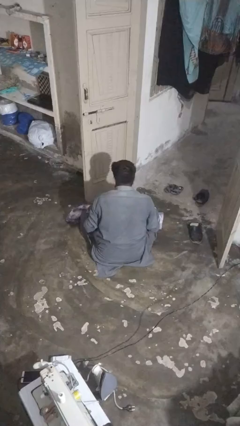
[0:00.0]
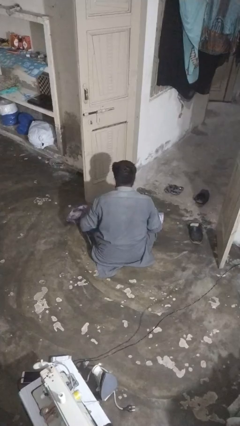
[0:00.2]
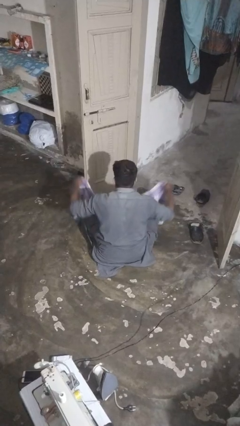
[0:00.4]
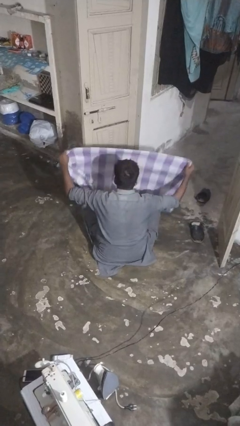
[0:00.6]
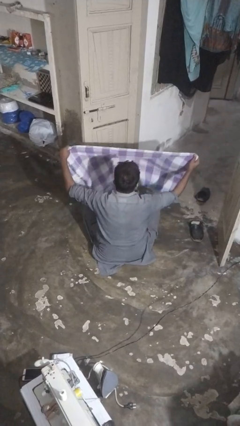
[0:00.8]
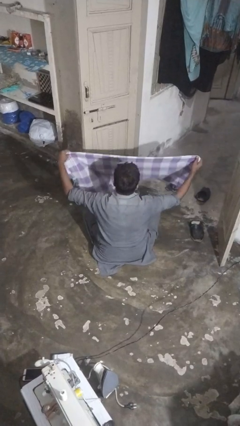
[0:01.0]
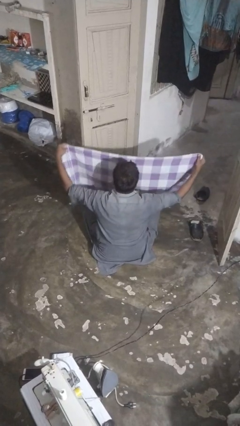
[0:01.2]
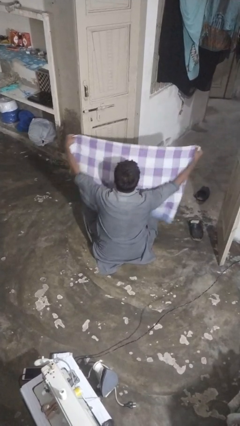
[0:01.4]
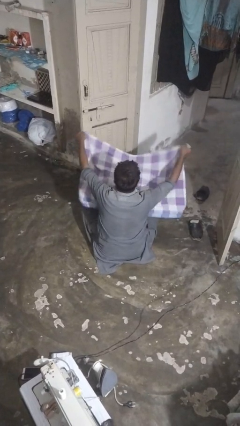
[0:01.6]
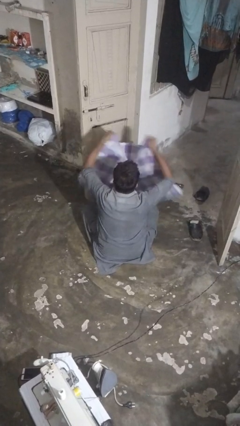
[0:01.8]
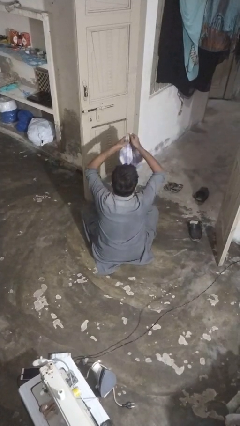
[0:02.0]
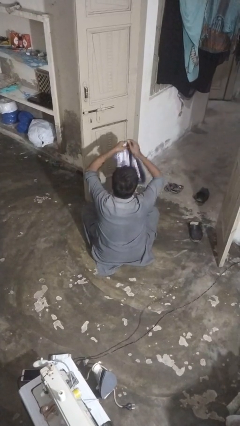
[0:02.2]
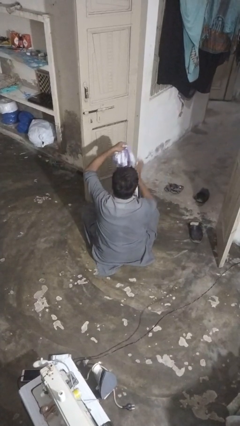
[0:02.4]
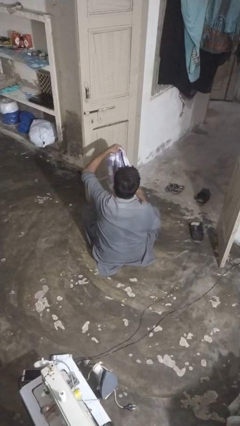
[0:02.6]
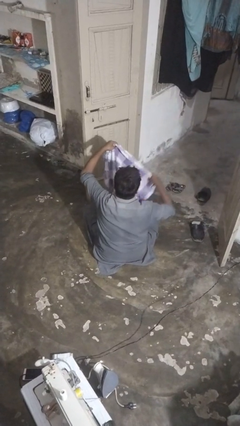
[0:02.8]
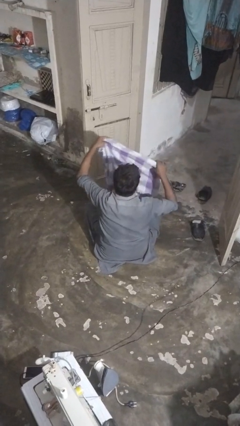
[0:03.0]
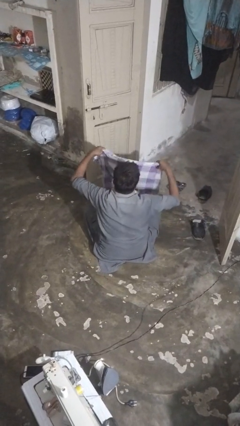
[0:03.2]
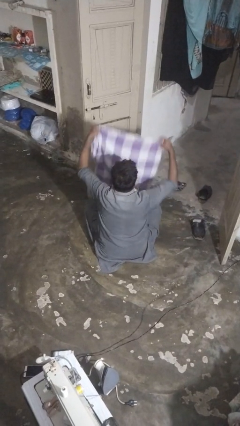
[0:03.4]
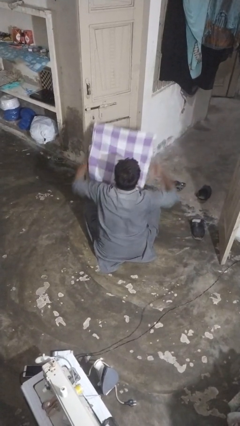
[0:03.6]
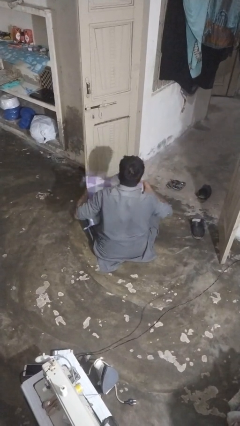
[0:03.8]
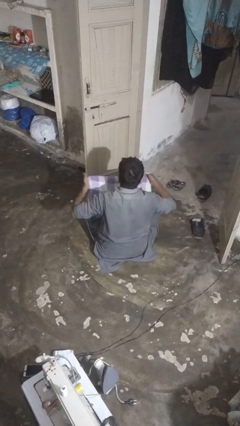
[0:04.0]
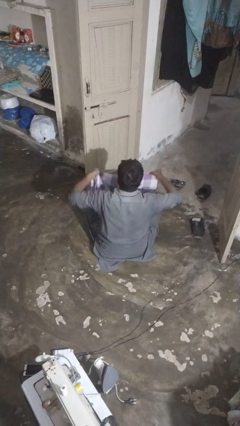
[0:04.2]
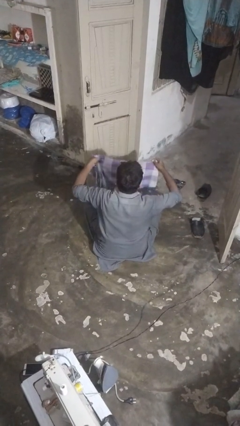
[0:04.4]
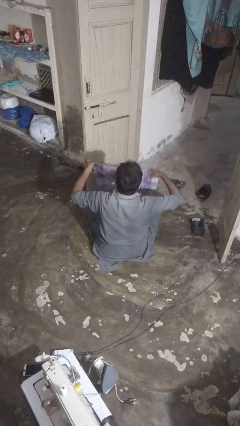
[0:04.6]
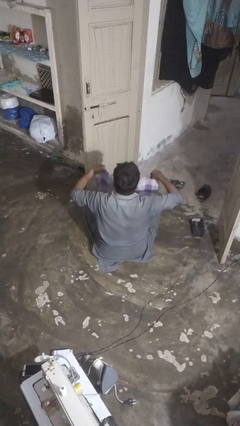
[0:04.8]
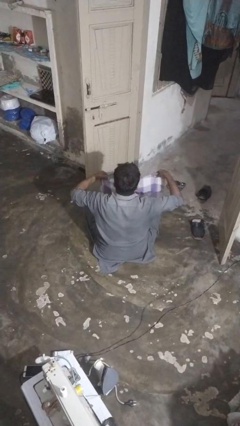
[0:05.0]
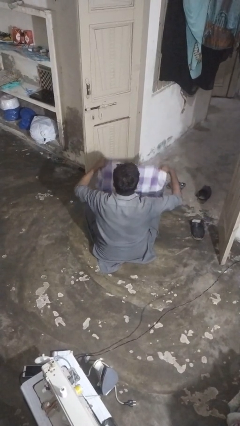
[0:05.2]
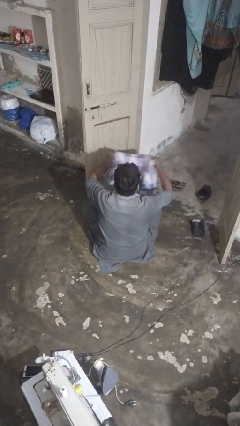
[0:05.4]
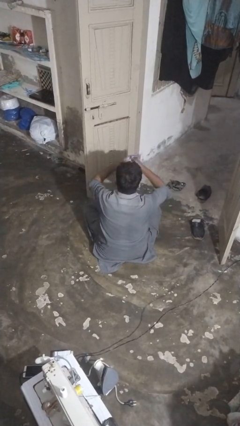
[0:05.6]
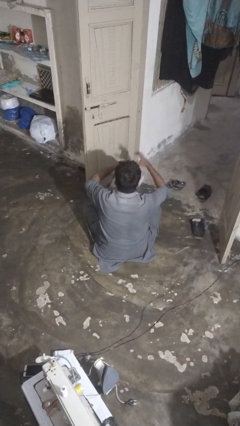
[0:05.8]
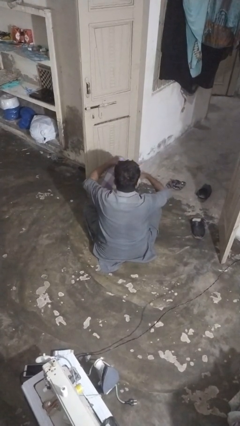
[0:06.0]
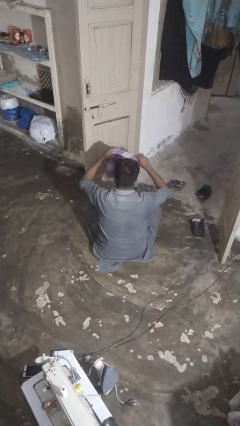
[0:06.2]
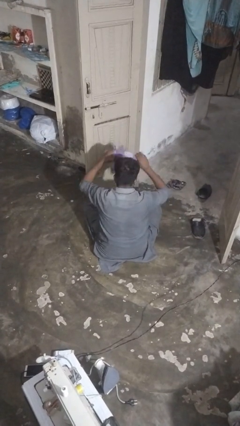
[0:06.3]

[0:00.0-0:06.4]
person folds blanket

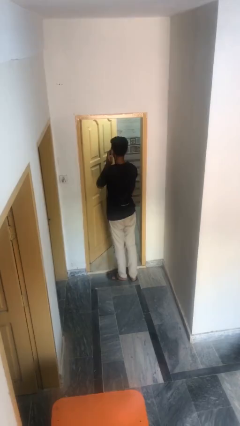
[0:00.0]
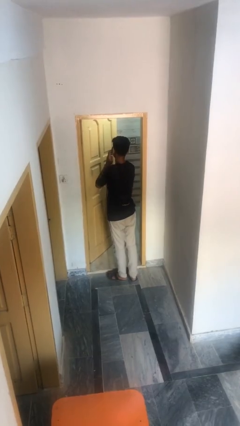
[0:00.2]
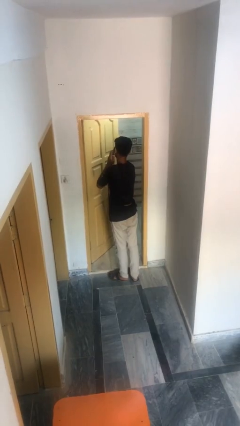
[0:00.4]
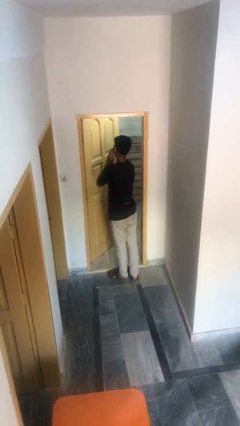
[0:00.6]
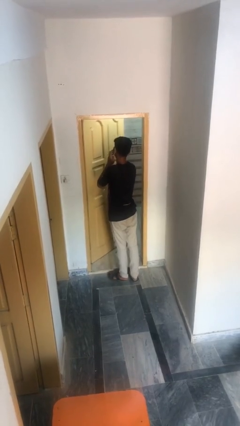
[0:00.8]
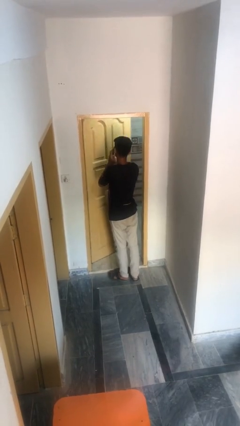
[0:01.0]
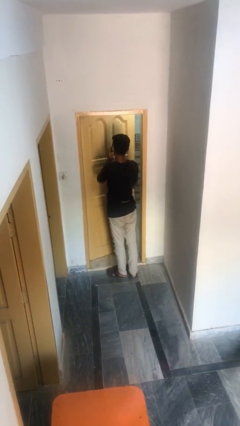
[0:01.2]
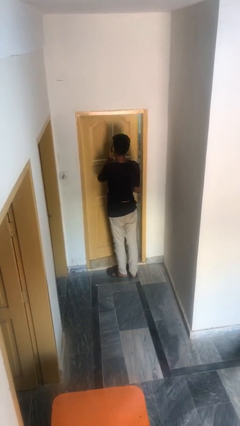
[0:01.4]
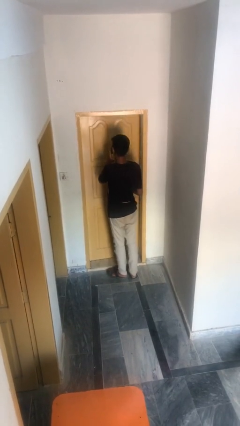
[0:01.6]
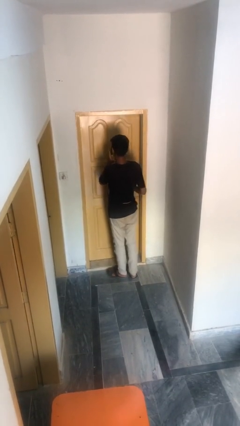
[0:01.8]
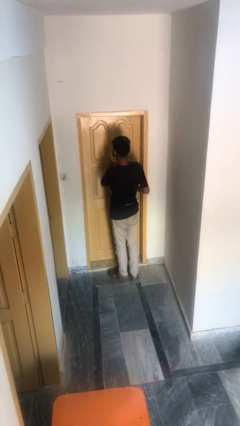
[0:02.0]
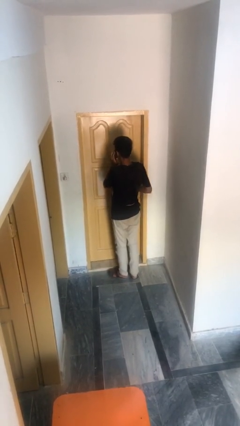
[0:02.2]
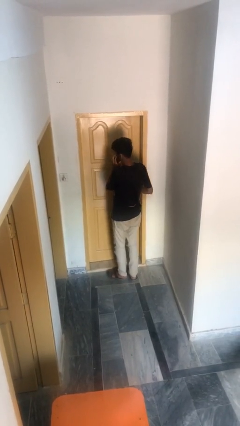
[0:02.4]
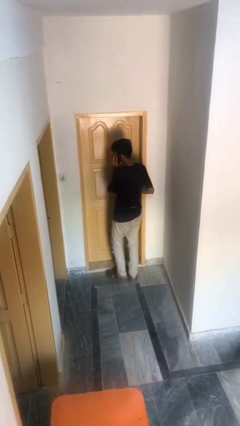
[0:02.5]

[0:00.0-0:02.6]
person closes facility door

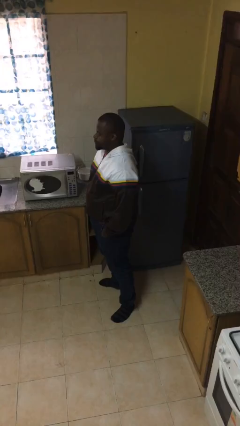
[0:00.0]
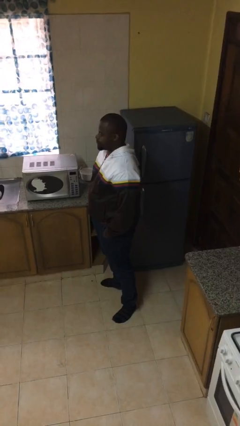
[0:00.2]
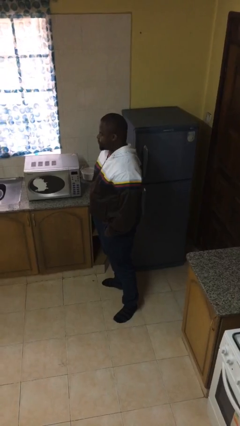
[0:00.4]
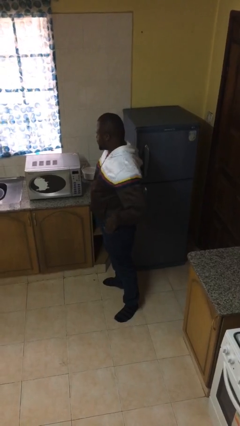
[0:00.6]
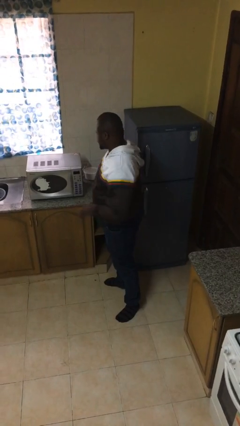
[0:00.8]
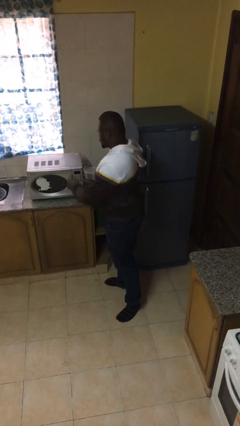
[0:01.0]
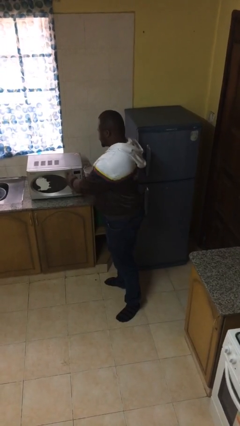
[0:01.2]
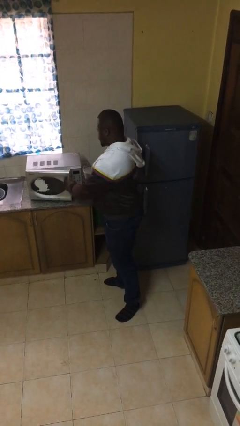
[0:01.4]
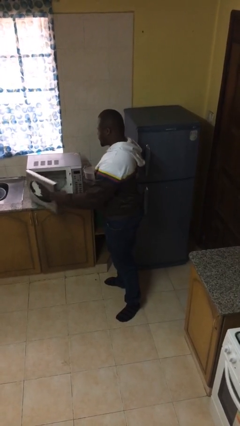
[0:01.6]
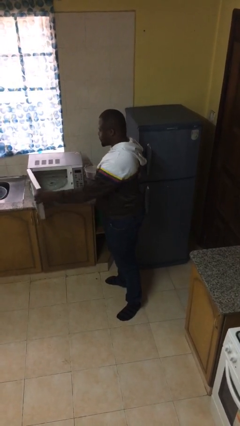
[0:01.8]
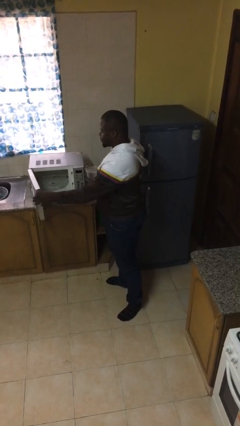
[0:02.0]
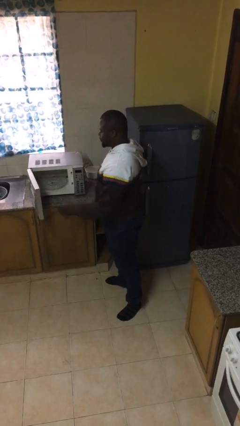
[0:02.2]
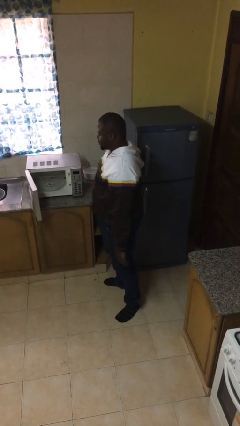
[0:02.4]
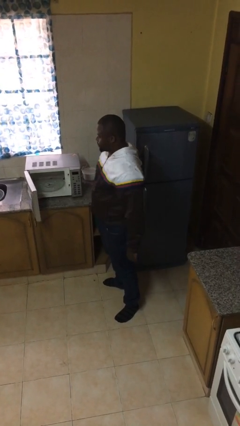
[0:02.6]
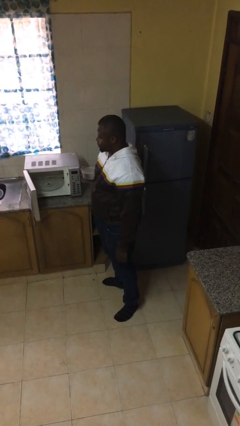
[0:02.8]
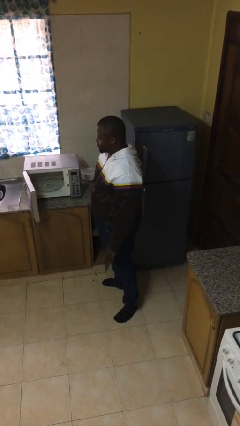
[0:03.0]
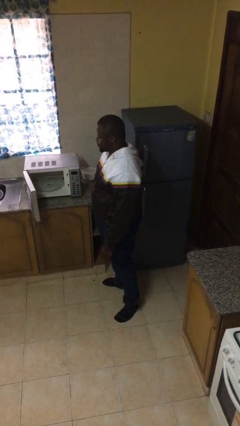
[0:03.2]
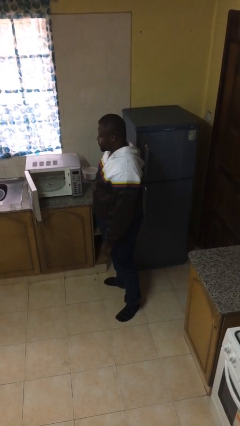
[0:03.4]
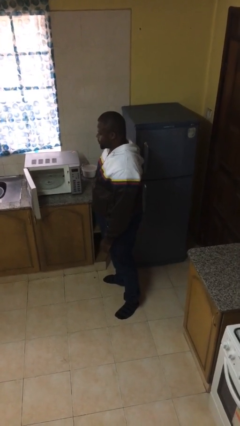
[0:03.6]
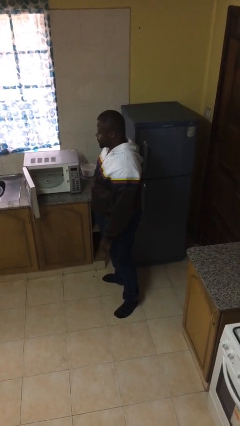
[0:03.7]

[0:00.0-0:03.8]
person opens microwave

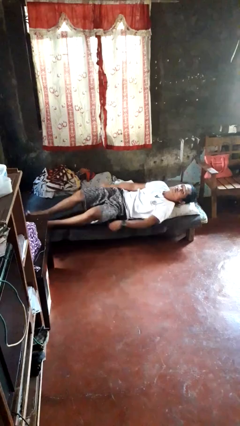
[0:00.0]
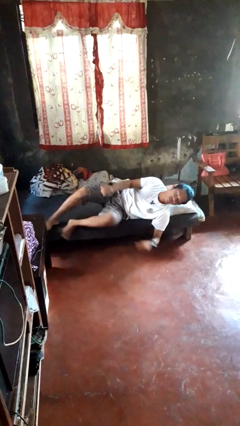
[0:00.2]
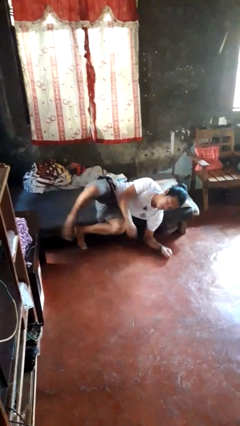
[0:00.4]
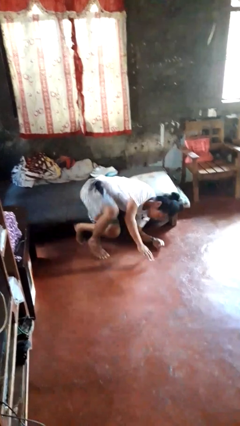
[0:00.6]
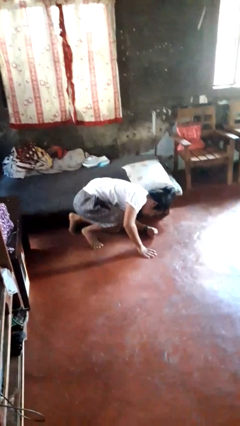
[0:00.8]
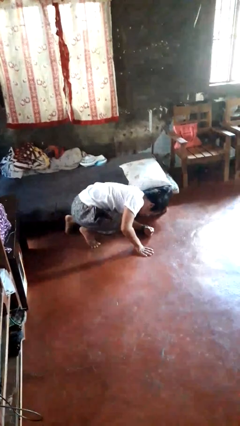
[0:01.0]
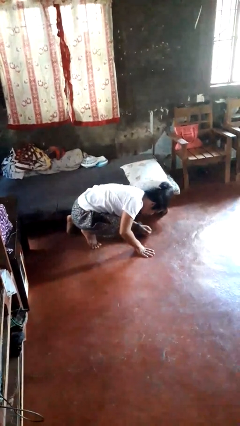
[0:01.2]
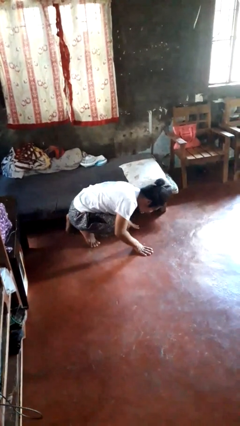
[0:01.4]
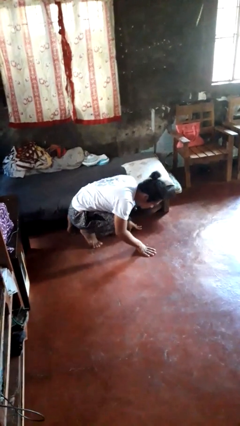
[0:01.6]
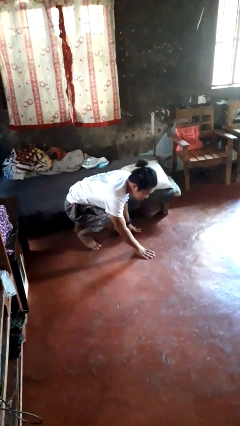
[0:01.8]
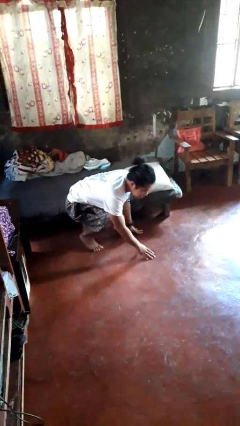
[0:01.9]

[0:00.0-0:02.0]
person falls from bed

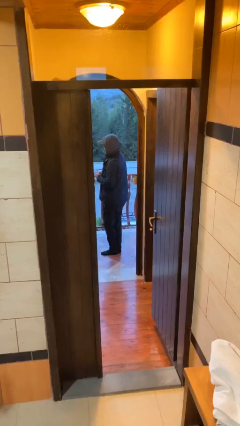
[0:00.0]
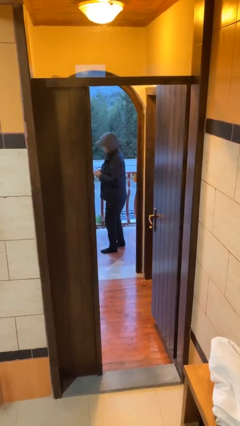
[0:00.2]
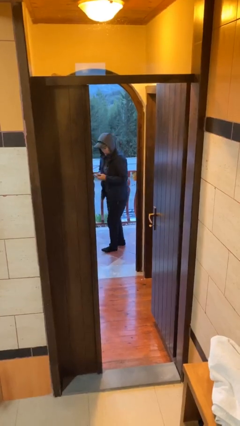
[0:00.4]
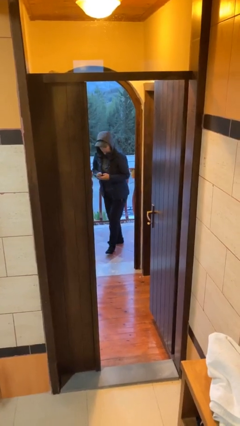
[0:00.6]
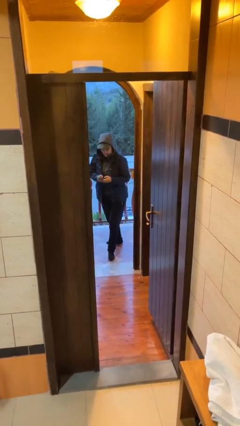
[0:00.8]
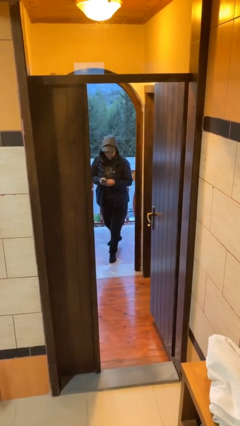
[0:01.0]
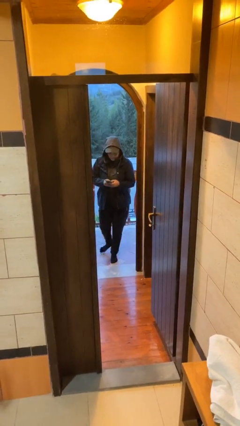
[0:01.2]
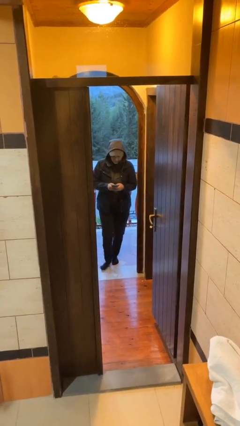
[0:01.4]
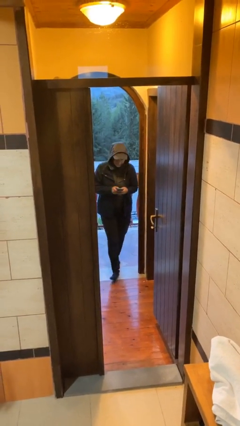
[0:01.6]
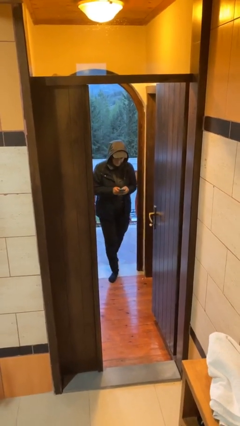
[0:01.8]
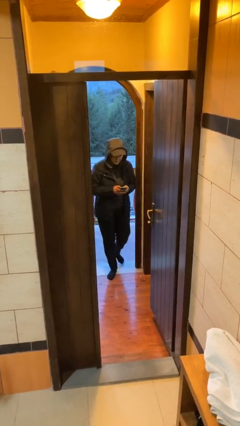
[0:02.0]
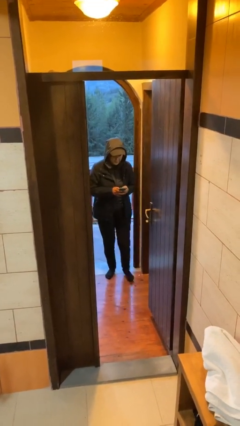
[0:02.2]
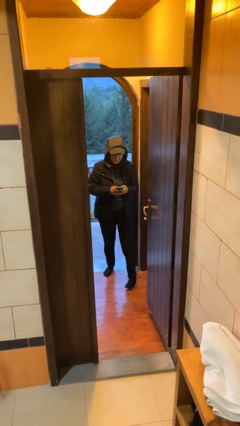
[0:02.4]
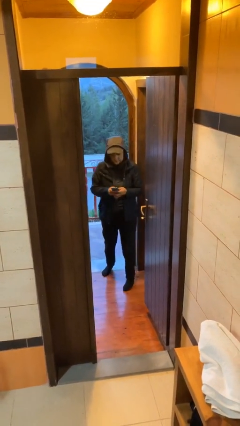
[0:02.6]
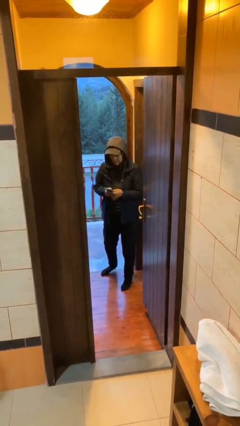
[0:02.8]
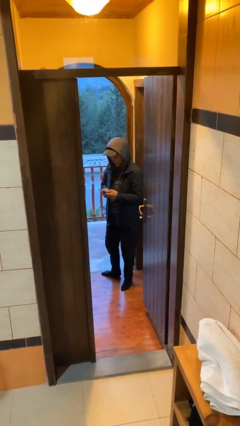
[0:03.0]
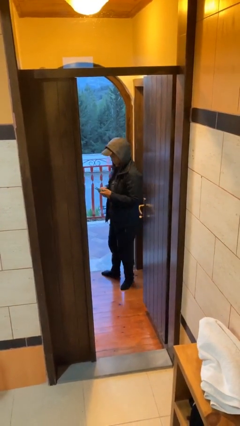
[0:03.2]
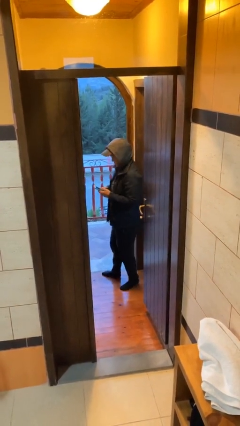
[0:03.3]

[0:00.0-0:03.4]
person enters scene through structure
